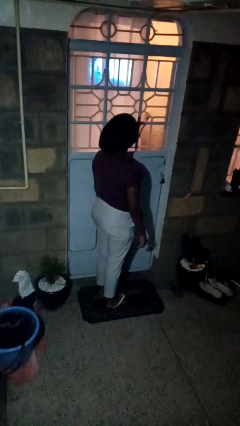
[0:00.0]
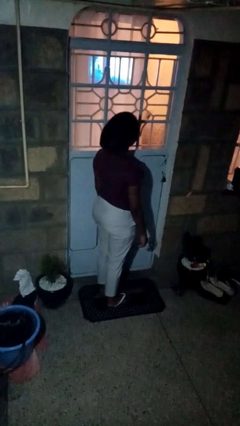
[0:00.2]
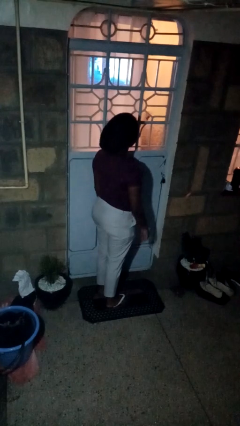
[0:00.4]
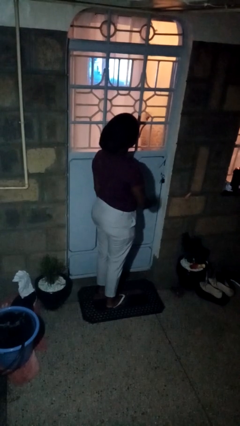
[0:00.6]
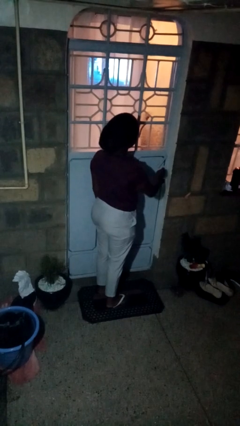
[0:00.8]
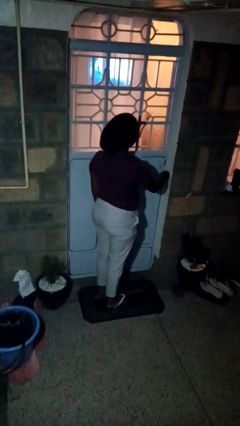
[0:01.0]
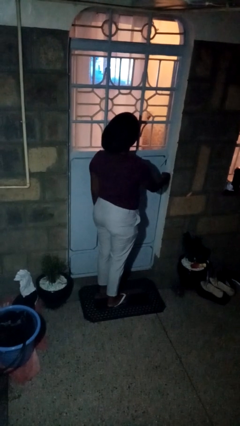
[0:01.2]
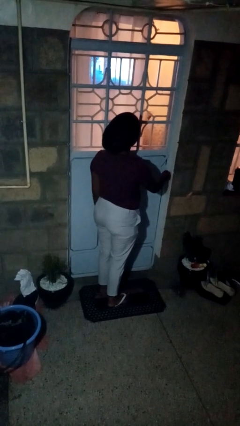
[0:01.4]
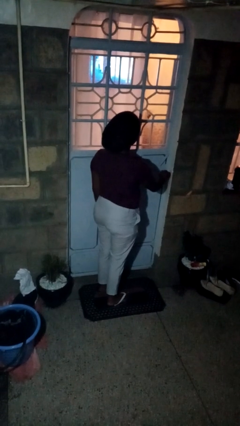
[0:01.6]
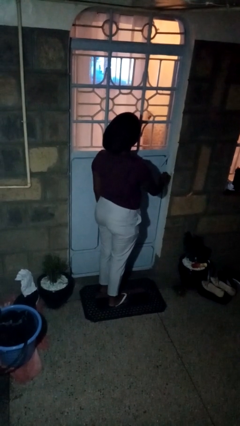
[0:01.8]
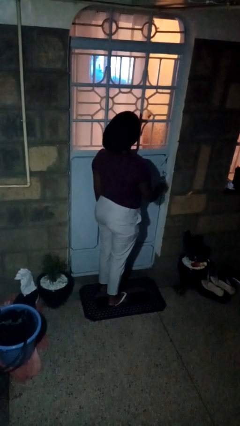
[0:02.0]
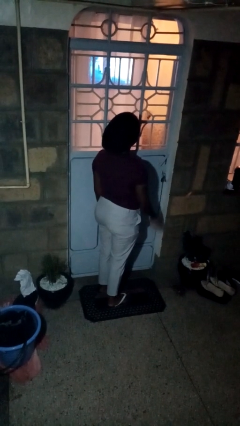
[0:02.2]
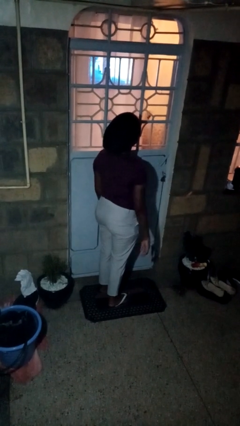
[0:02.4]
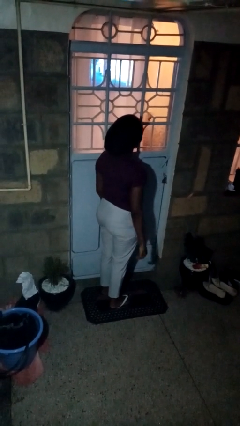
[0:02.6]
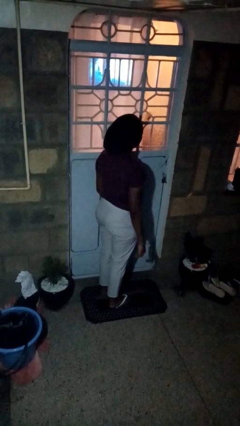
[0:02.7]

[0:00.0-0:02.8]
person unlocks door with keys

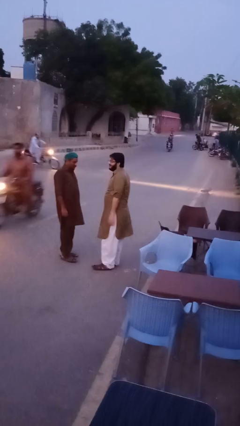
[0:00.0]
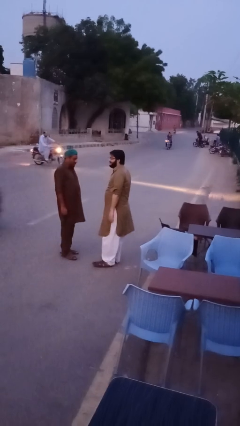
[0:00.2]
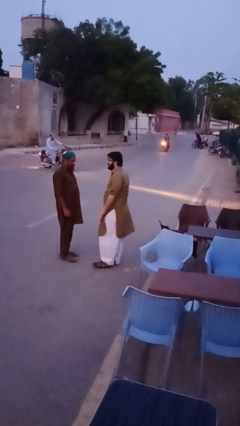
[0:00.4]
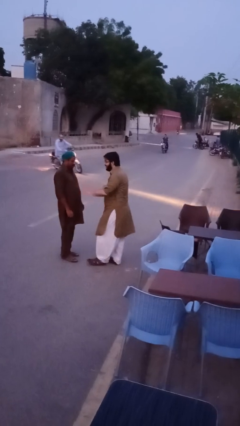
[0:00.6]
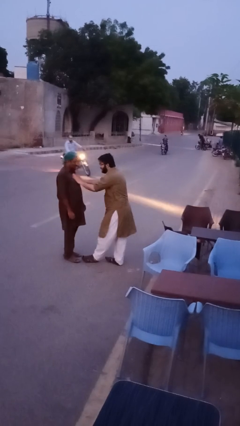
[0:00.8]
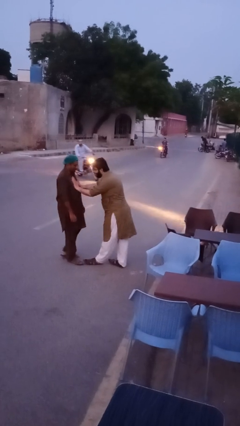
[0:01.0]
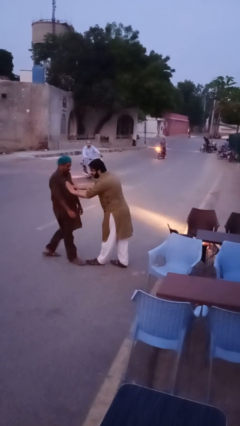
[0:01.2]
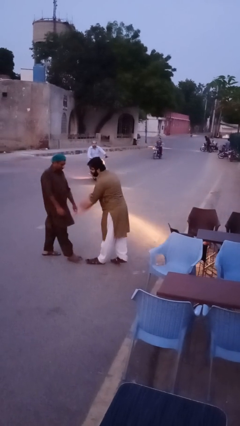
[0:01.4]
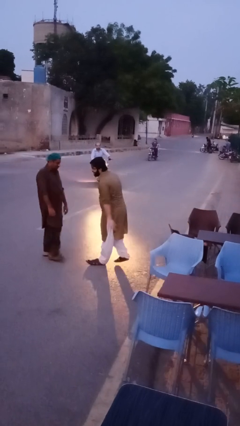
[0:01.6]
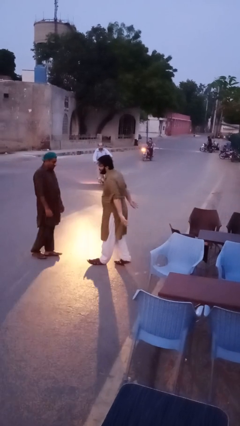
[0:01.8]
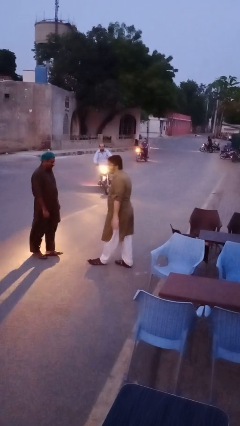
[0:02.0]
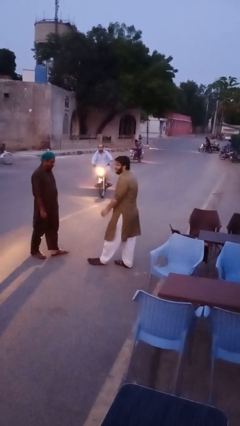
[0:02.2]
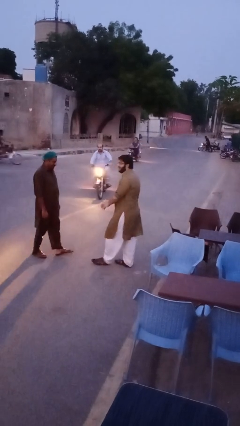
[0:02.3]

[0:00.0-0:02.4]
person shoves person

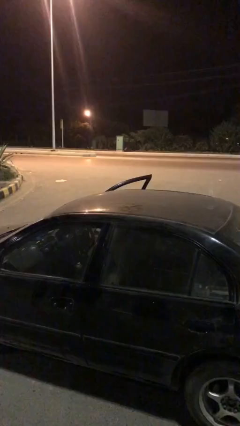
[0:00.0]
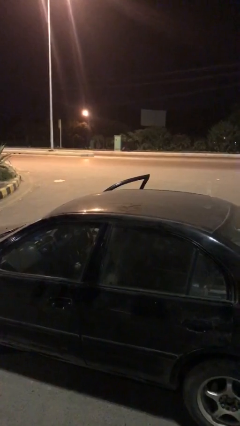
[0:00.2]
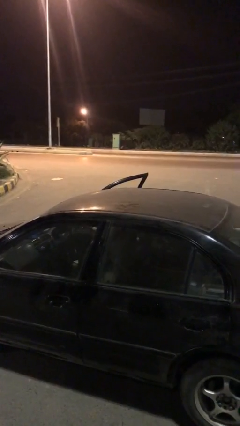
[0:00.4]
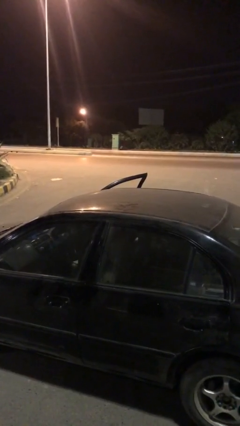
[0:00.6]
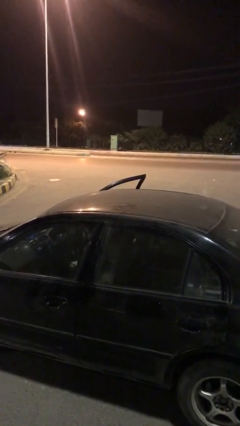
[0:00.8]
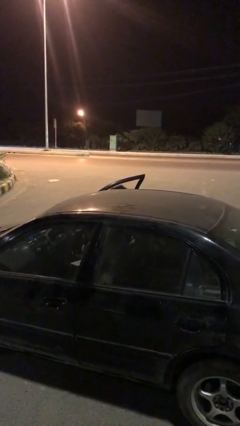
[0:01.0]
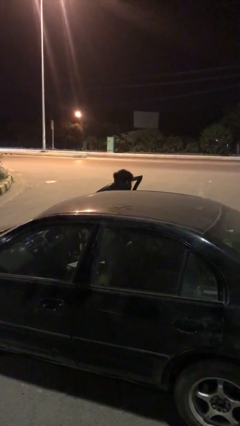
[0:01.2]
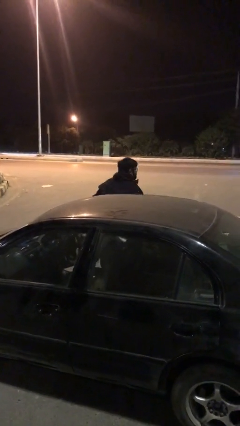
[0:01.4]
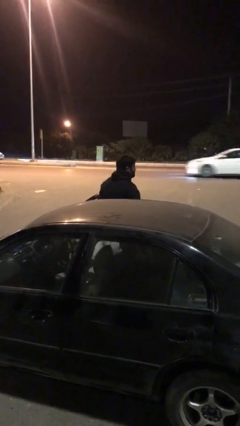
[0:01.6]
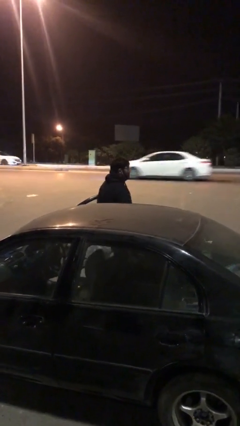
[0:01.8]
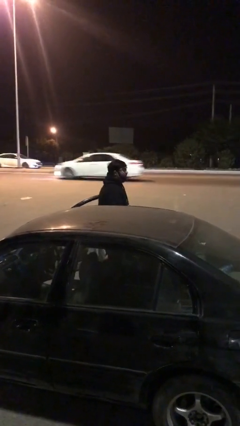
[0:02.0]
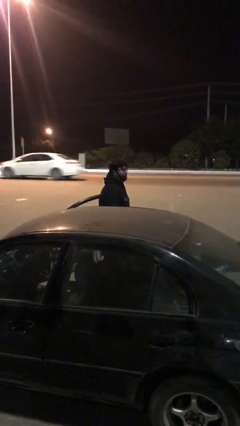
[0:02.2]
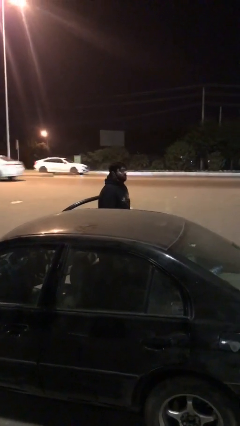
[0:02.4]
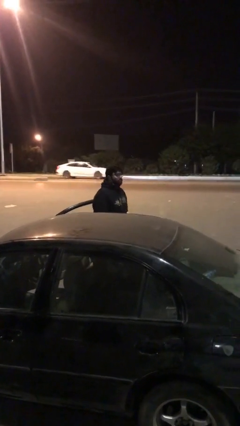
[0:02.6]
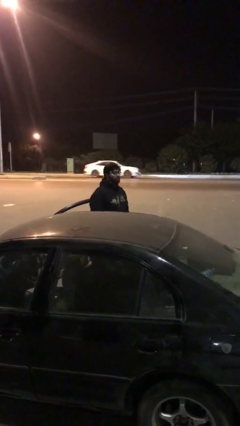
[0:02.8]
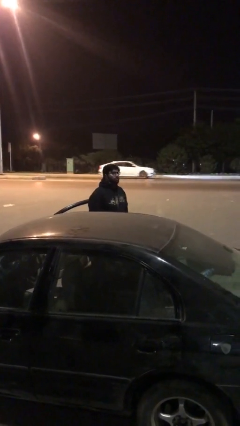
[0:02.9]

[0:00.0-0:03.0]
person exits car

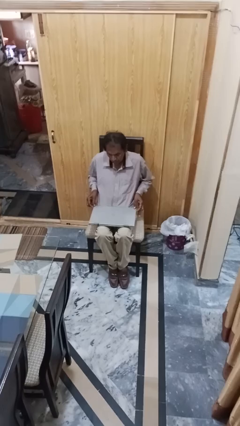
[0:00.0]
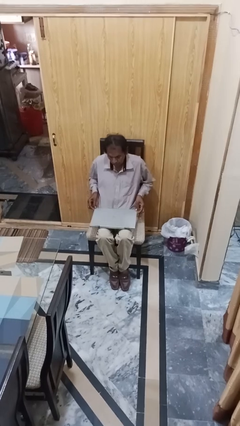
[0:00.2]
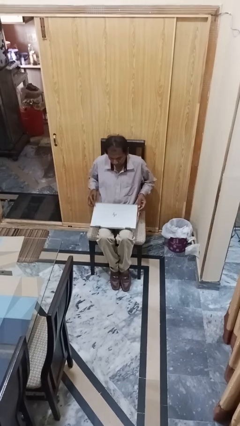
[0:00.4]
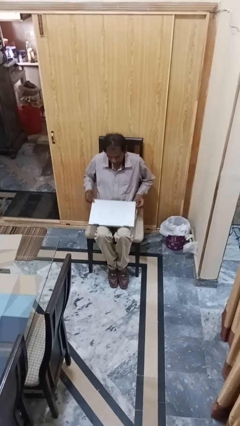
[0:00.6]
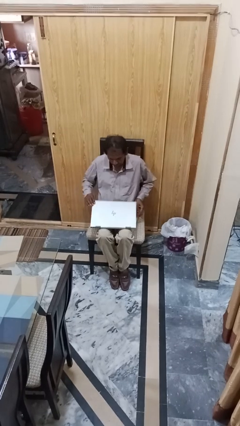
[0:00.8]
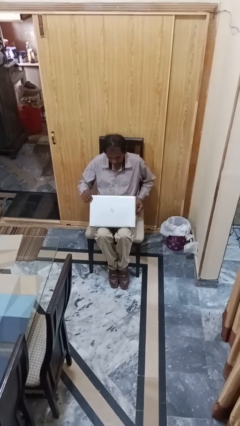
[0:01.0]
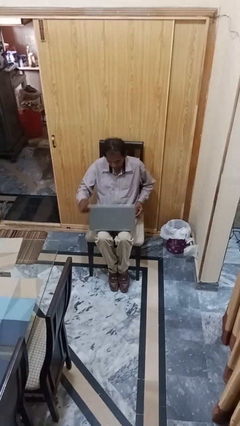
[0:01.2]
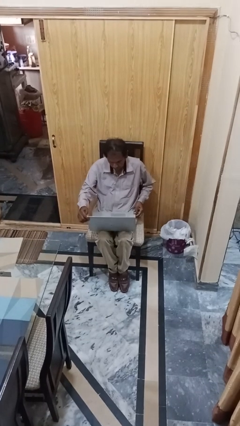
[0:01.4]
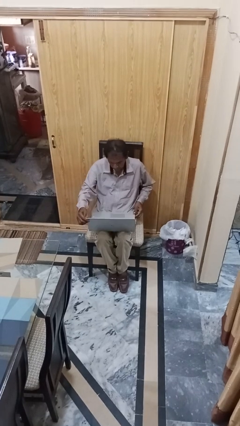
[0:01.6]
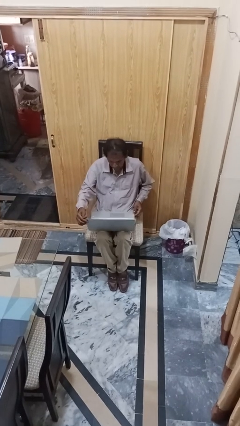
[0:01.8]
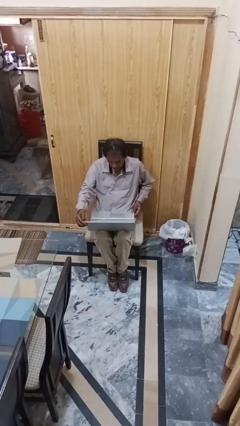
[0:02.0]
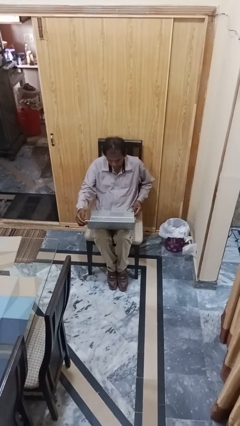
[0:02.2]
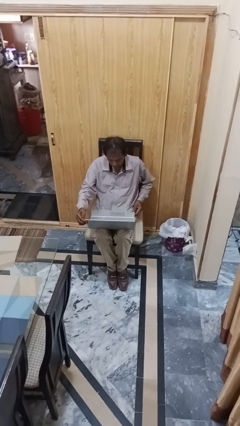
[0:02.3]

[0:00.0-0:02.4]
person opens laptop

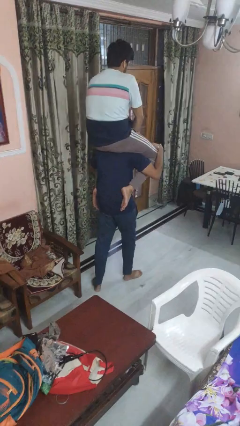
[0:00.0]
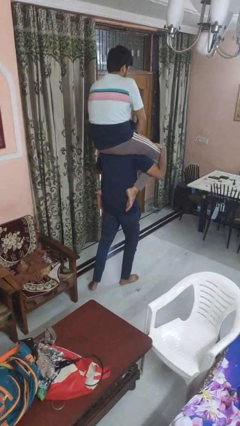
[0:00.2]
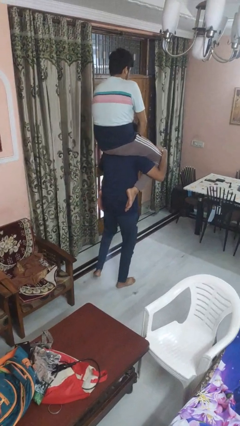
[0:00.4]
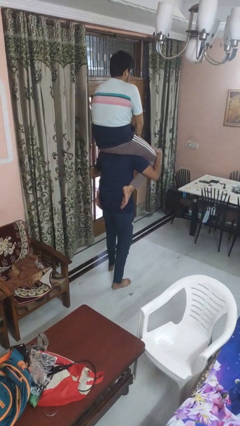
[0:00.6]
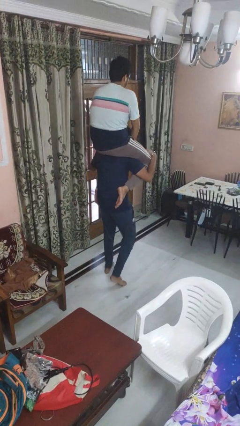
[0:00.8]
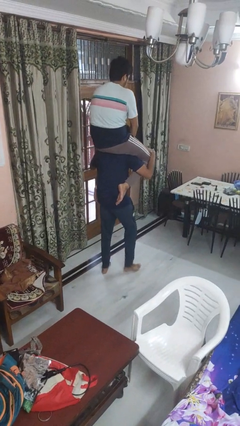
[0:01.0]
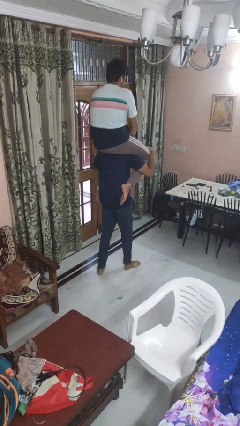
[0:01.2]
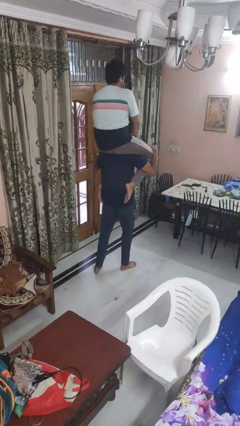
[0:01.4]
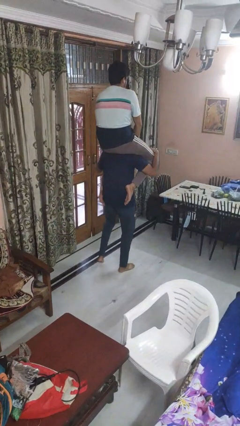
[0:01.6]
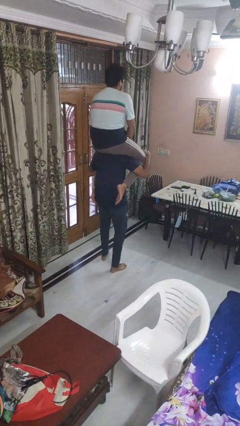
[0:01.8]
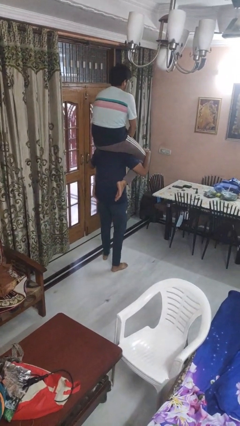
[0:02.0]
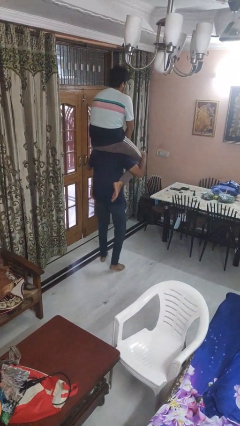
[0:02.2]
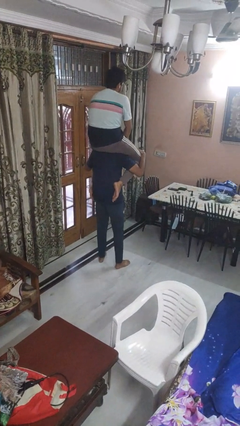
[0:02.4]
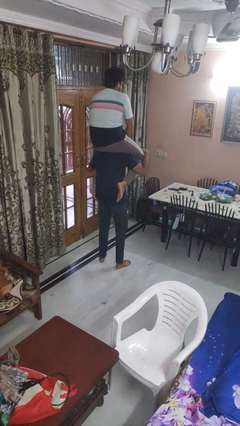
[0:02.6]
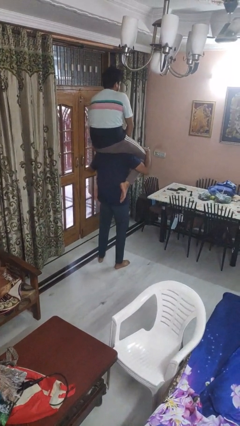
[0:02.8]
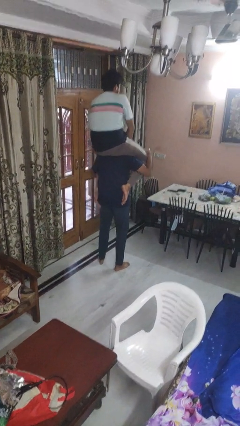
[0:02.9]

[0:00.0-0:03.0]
person carries person on shoulders

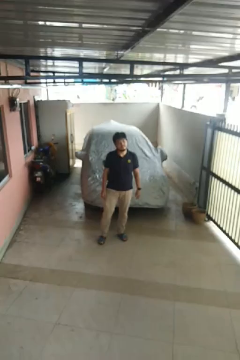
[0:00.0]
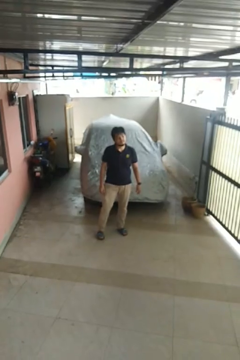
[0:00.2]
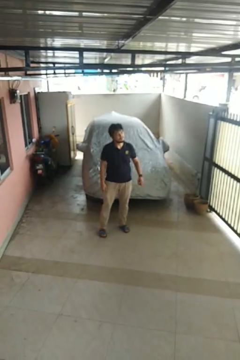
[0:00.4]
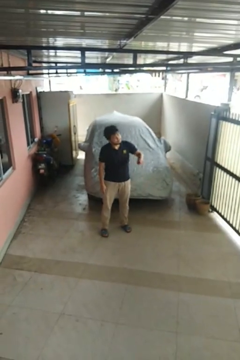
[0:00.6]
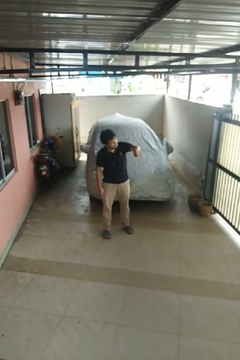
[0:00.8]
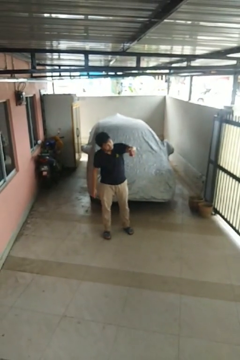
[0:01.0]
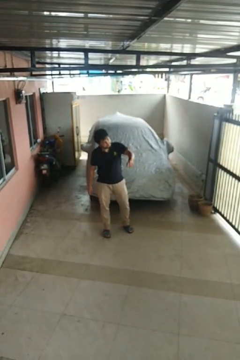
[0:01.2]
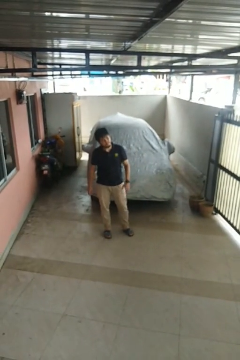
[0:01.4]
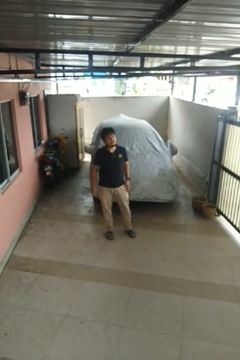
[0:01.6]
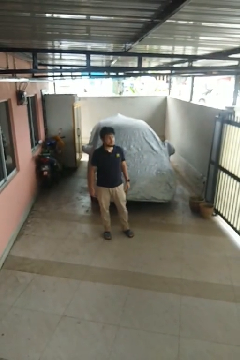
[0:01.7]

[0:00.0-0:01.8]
person points at person

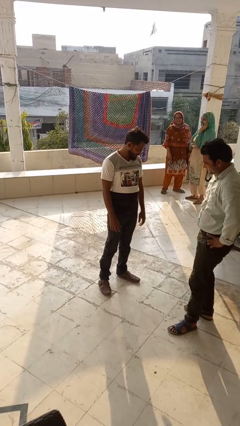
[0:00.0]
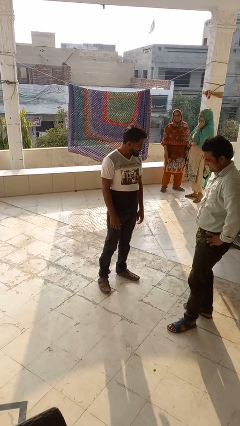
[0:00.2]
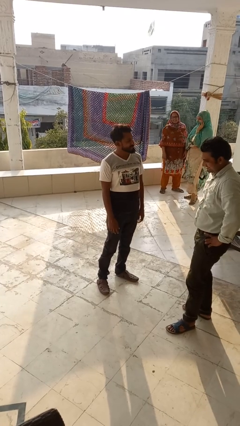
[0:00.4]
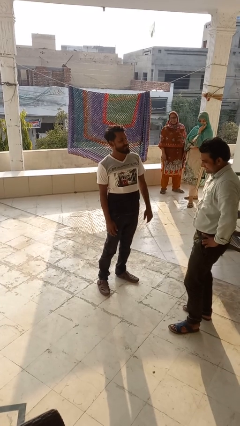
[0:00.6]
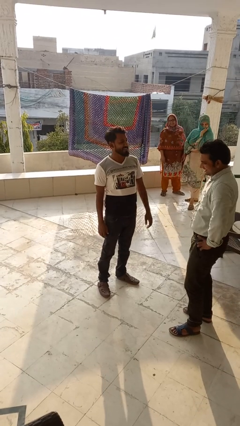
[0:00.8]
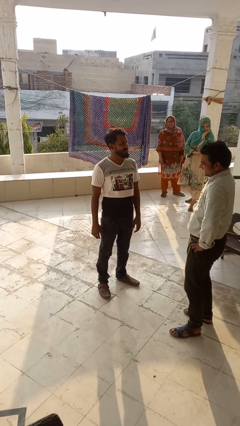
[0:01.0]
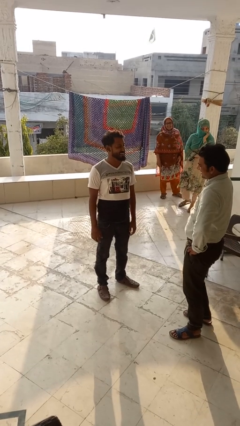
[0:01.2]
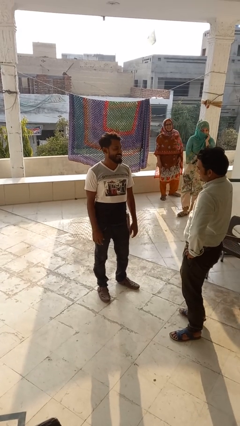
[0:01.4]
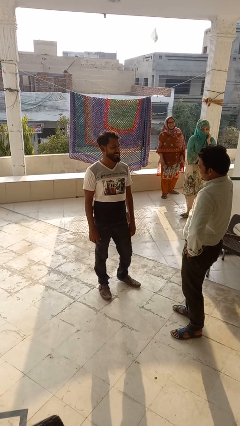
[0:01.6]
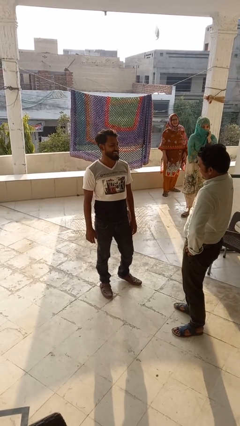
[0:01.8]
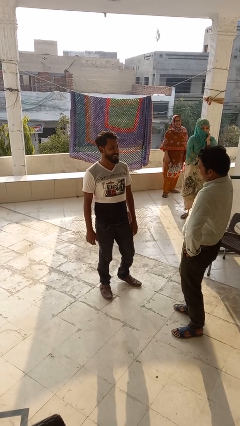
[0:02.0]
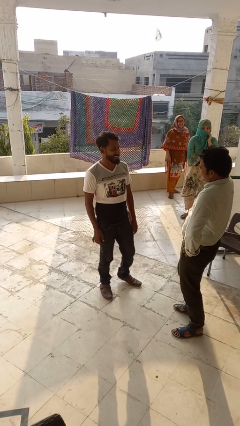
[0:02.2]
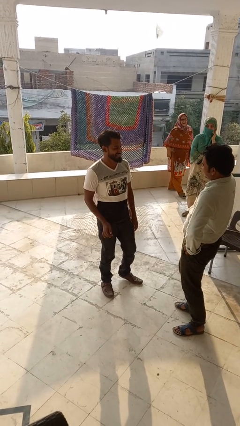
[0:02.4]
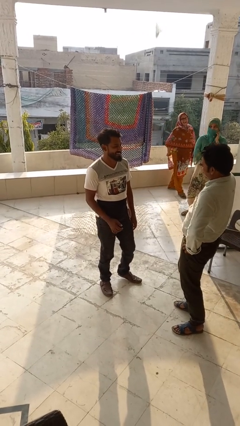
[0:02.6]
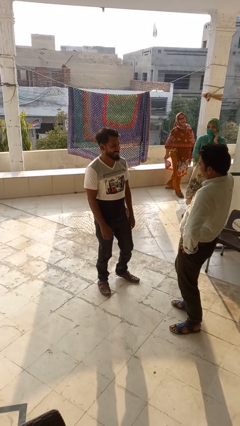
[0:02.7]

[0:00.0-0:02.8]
person laughs with person
